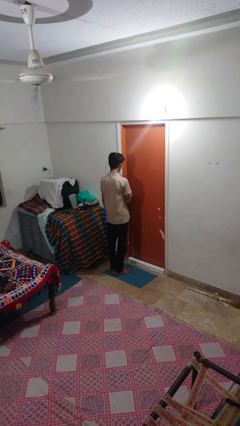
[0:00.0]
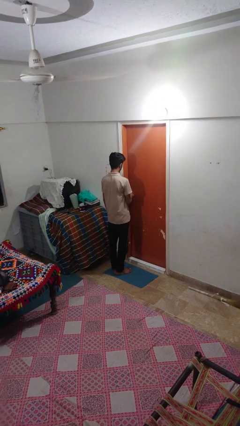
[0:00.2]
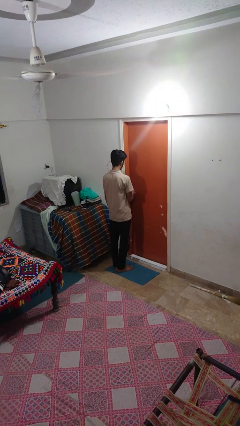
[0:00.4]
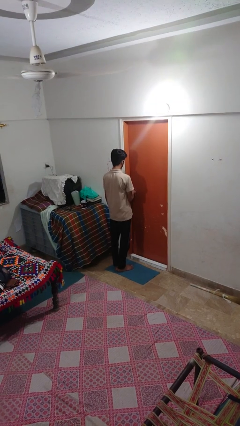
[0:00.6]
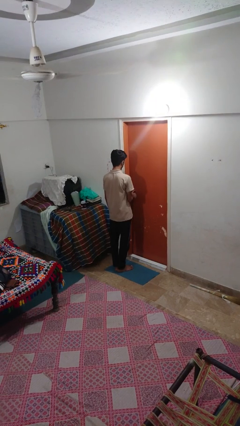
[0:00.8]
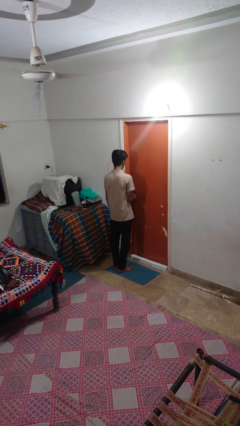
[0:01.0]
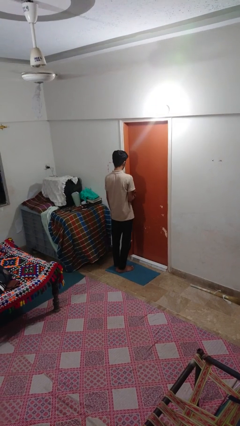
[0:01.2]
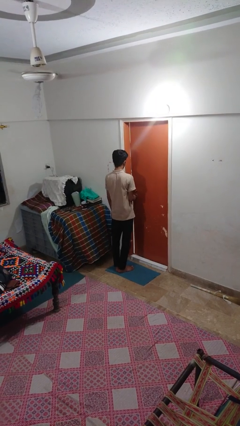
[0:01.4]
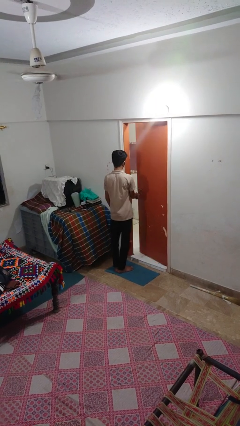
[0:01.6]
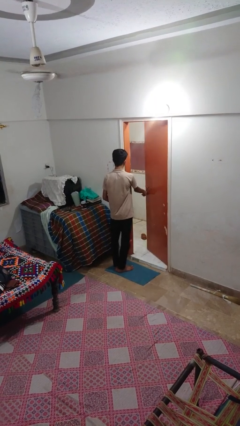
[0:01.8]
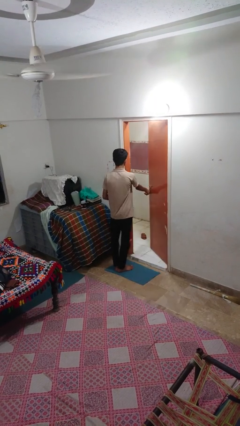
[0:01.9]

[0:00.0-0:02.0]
person opens facility door

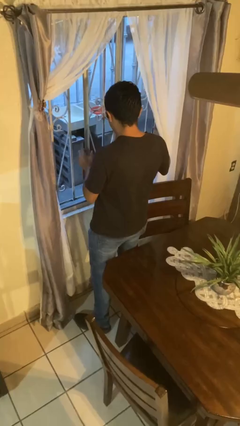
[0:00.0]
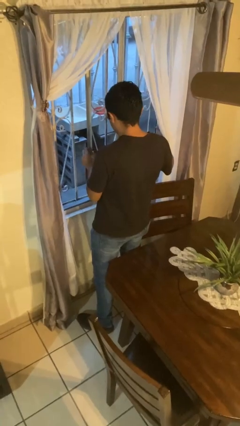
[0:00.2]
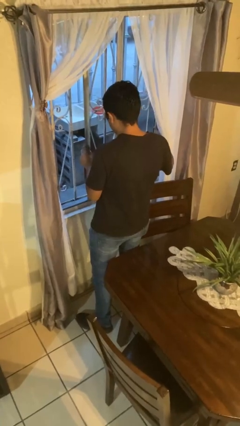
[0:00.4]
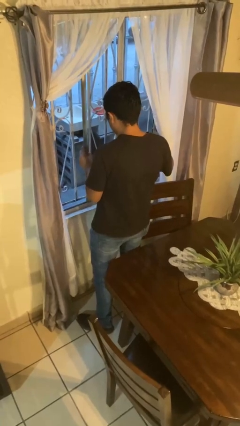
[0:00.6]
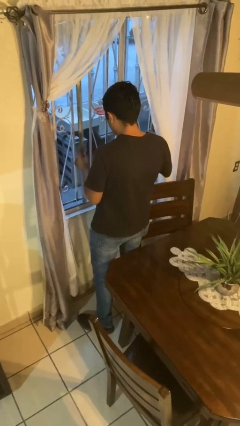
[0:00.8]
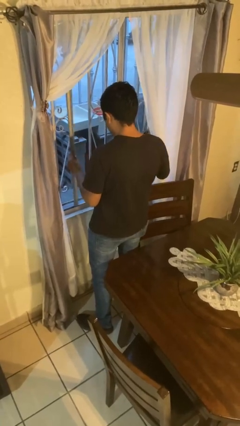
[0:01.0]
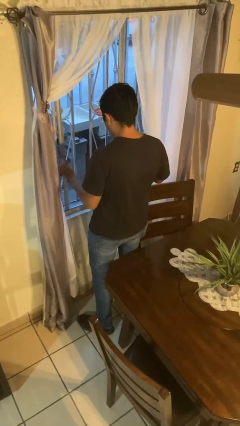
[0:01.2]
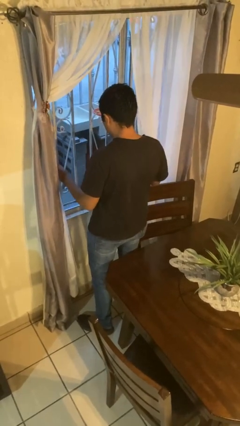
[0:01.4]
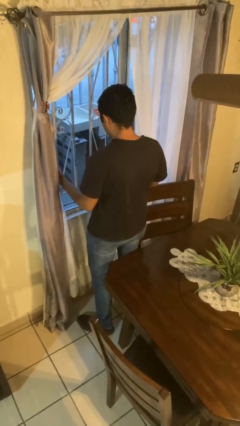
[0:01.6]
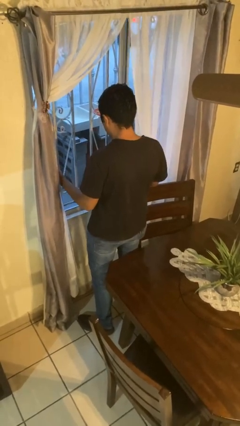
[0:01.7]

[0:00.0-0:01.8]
person closes home window

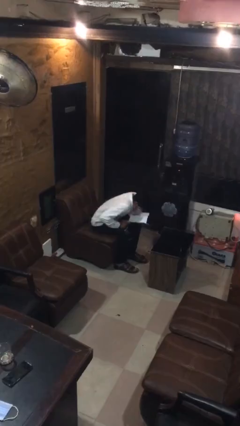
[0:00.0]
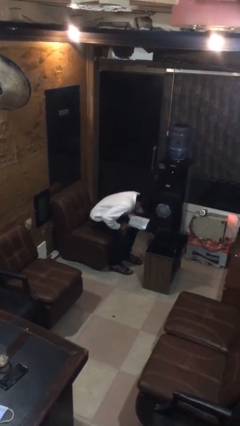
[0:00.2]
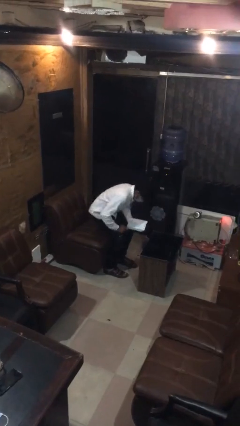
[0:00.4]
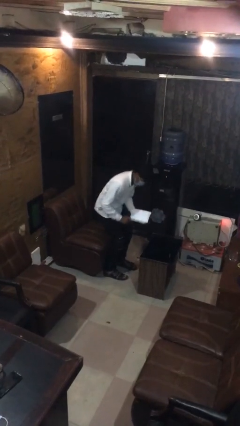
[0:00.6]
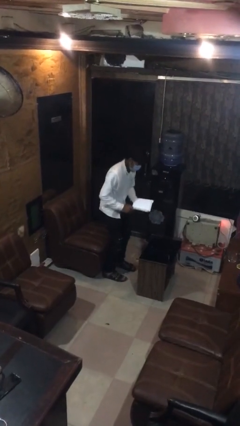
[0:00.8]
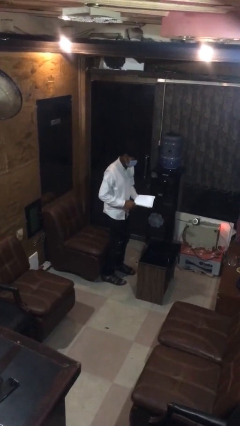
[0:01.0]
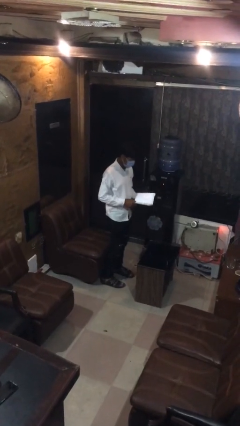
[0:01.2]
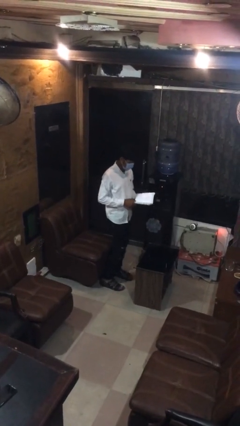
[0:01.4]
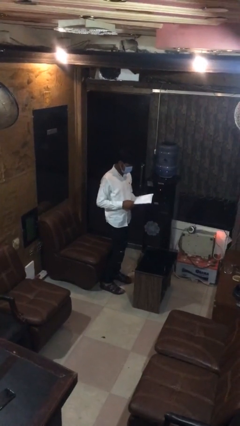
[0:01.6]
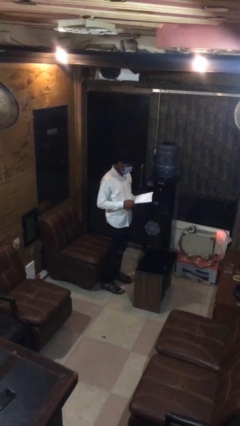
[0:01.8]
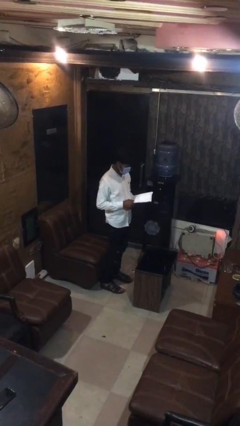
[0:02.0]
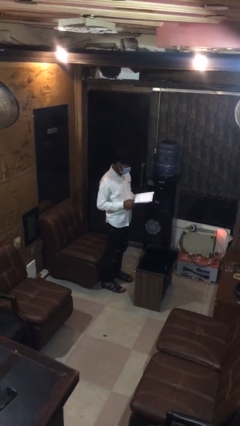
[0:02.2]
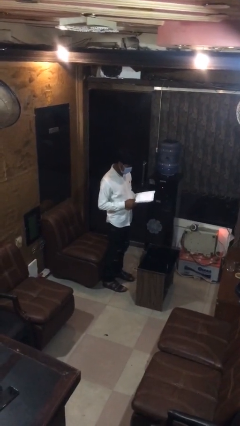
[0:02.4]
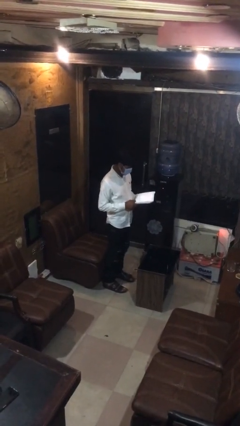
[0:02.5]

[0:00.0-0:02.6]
person stands up

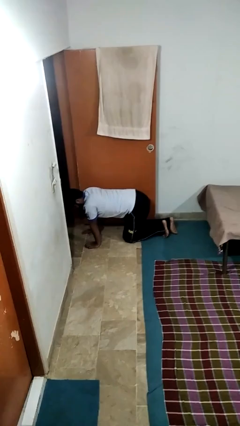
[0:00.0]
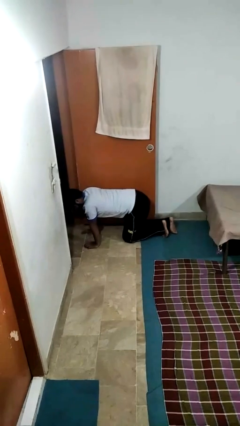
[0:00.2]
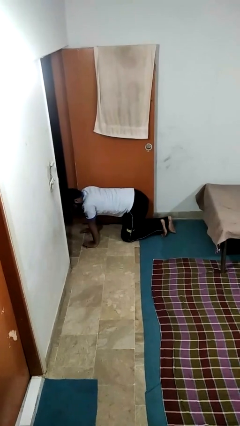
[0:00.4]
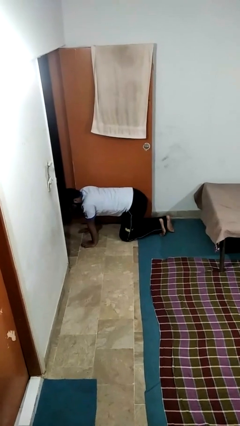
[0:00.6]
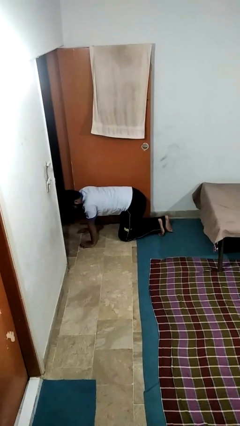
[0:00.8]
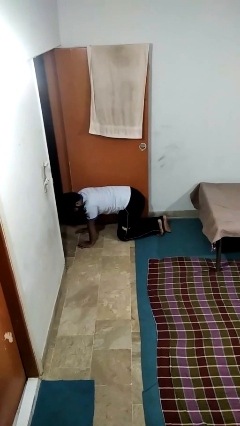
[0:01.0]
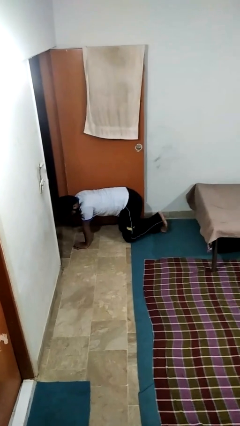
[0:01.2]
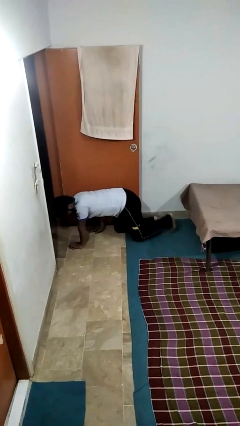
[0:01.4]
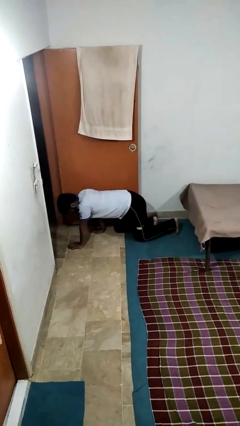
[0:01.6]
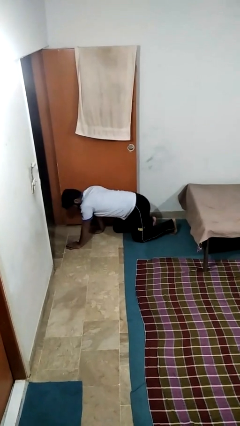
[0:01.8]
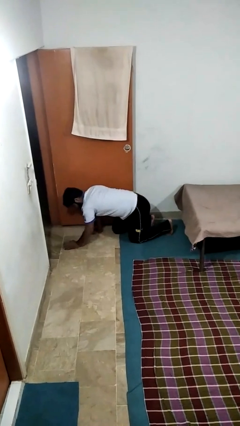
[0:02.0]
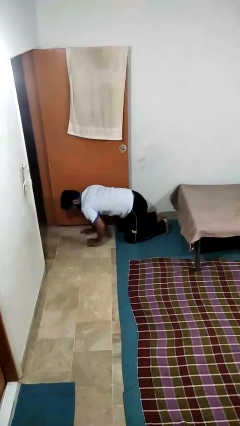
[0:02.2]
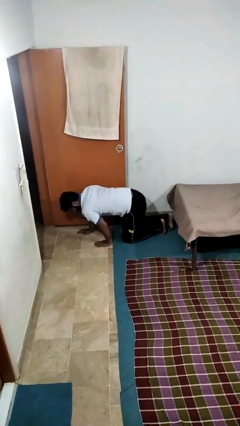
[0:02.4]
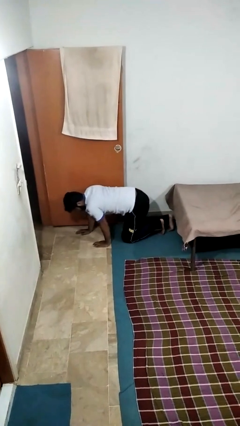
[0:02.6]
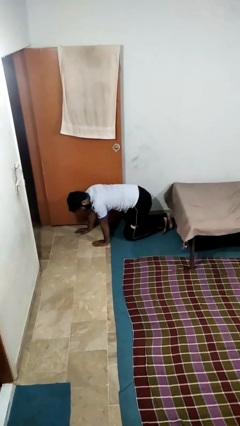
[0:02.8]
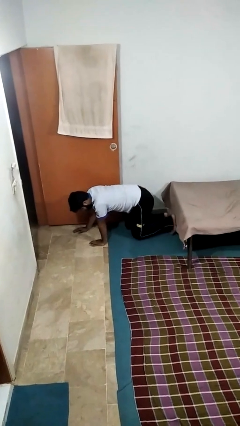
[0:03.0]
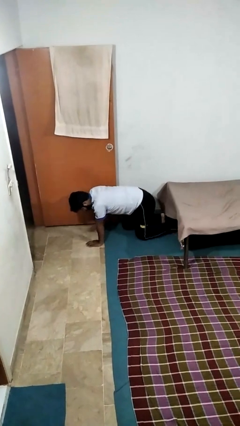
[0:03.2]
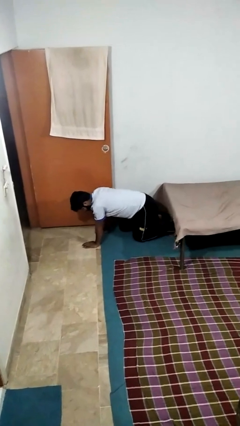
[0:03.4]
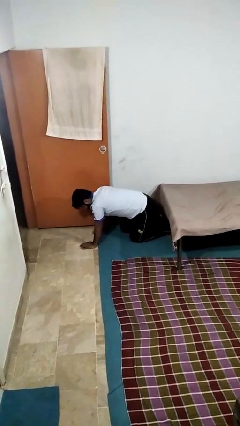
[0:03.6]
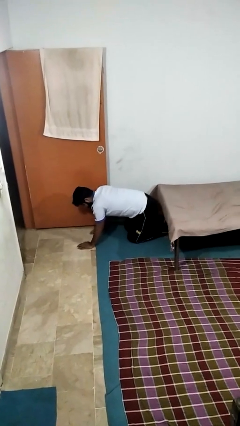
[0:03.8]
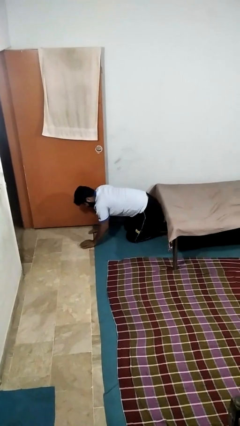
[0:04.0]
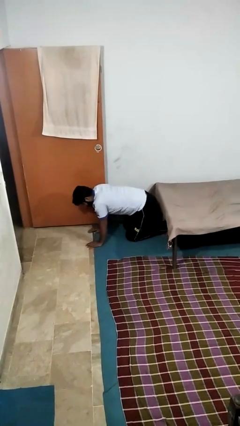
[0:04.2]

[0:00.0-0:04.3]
person crawls

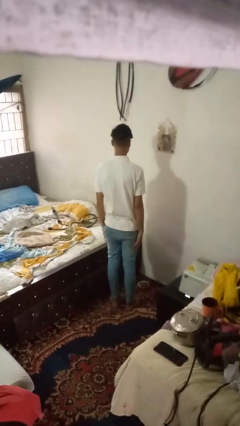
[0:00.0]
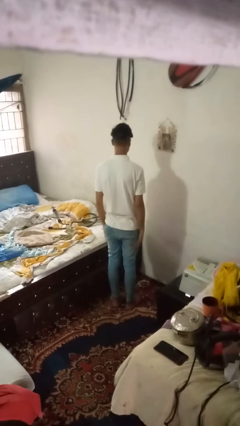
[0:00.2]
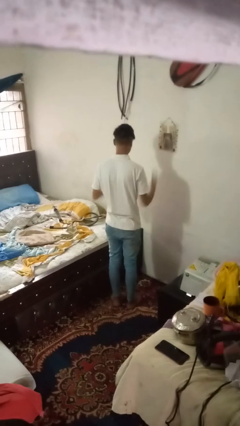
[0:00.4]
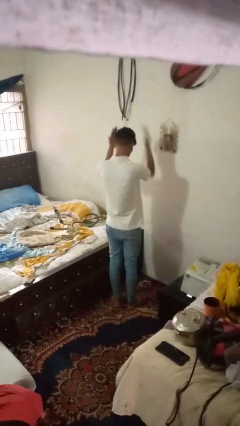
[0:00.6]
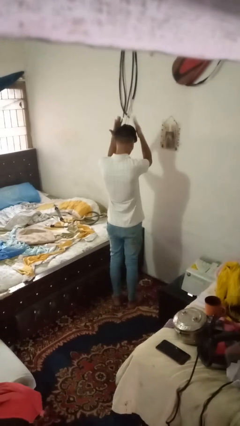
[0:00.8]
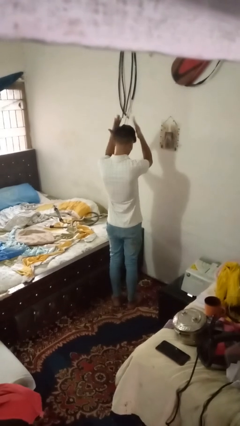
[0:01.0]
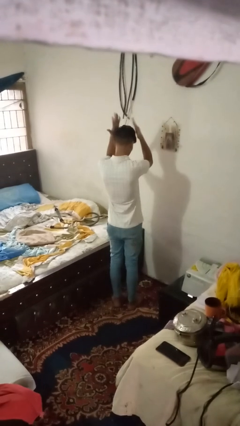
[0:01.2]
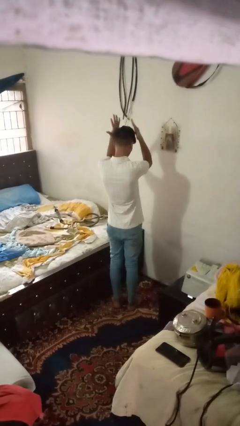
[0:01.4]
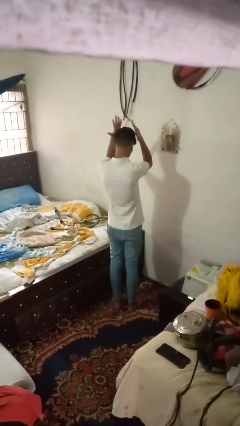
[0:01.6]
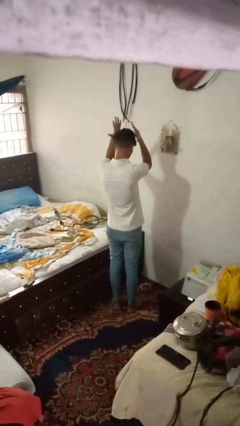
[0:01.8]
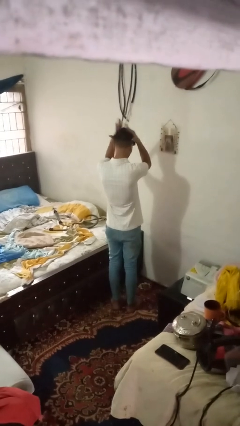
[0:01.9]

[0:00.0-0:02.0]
person pats head

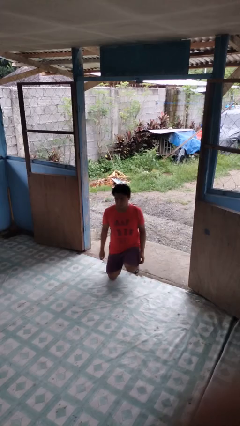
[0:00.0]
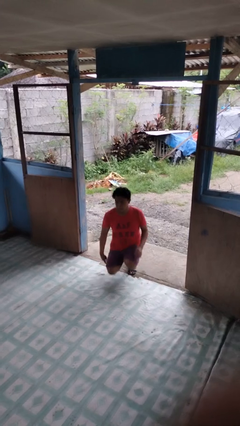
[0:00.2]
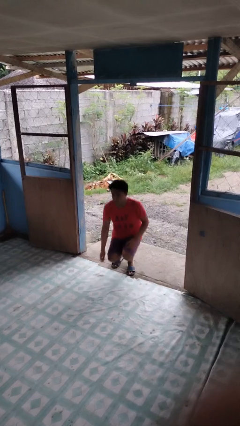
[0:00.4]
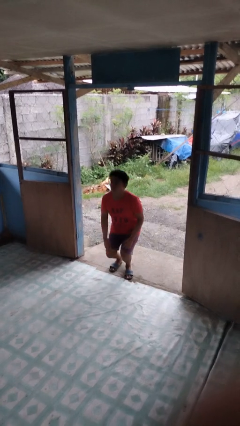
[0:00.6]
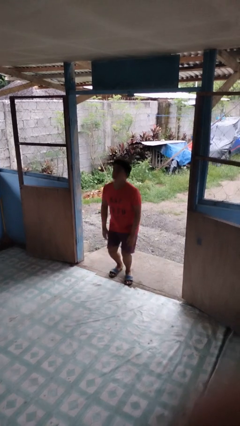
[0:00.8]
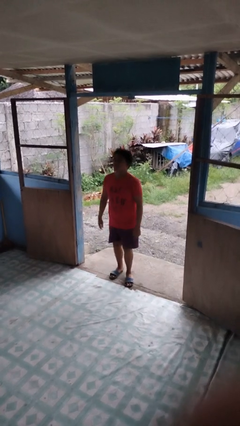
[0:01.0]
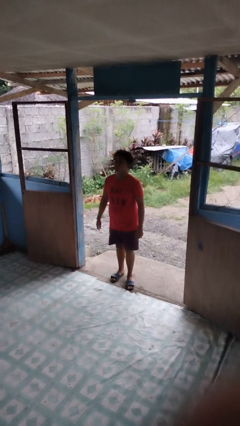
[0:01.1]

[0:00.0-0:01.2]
person stands up from floor

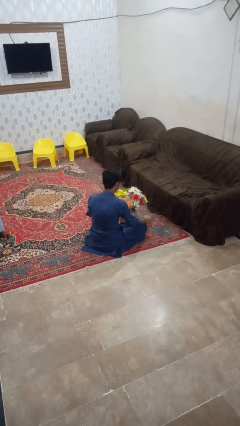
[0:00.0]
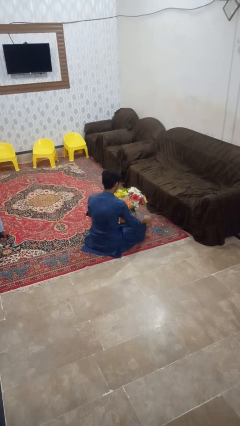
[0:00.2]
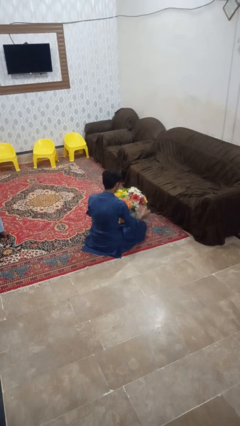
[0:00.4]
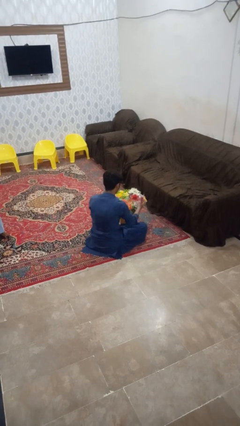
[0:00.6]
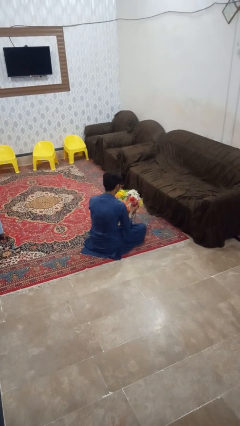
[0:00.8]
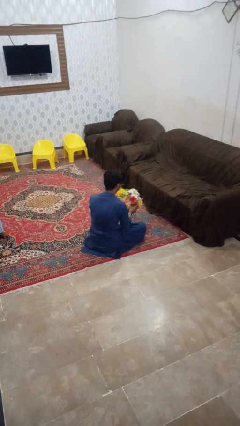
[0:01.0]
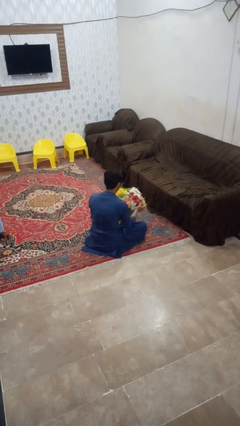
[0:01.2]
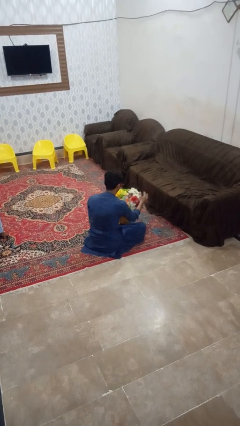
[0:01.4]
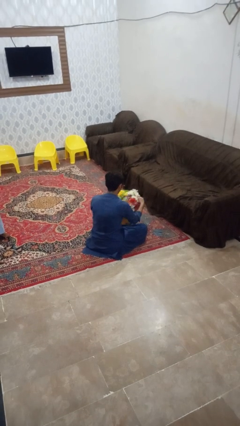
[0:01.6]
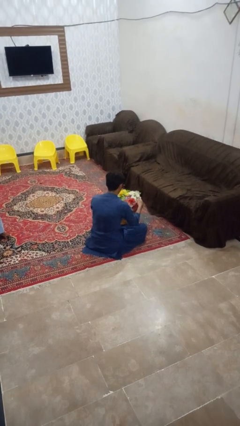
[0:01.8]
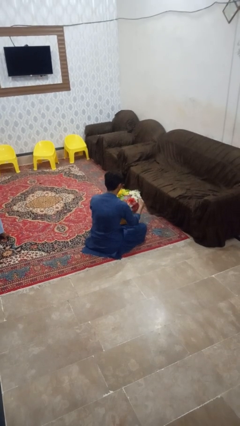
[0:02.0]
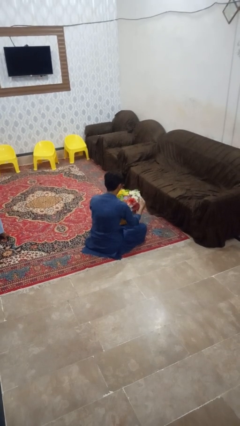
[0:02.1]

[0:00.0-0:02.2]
person arranges flowers in vase

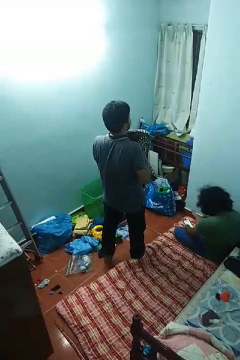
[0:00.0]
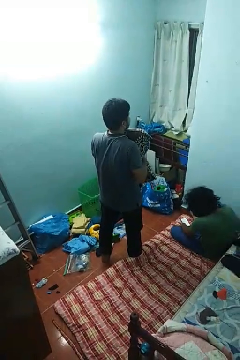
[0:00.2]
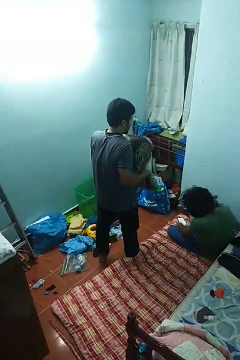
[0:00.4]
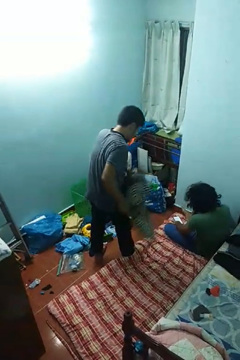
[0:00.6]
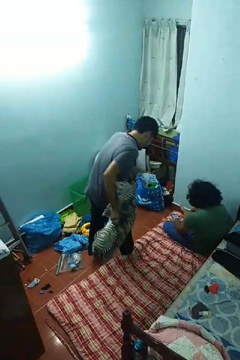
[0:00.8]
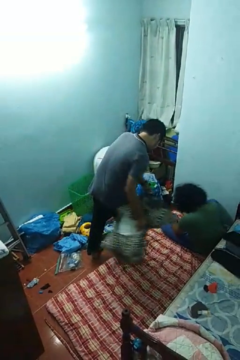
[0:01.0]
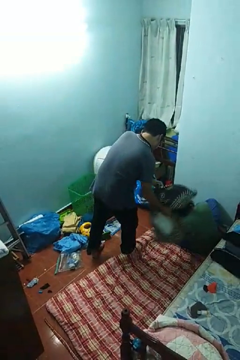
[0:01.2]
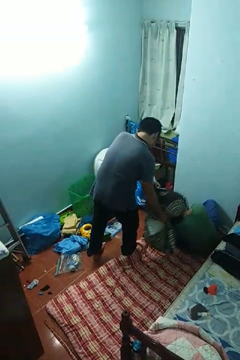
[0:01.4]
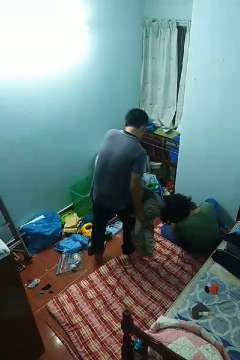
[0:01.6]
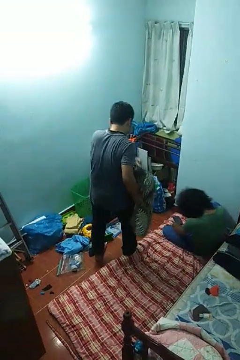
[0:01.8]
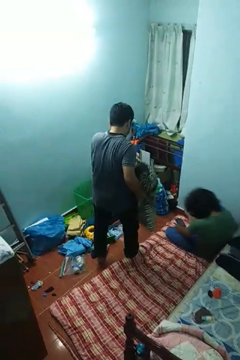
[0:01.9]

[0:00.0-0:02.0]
person hits person with pillow
